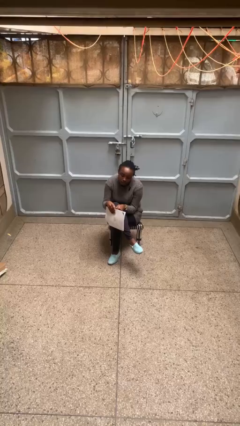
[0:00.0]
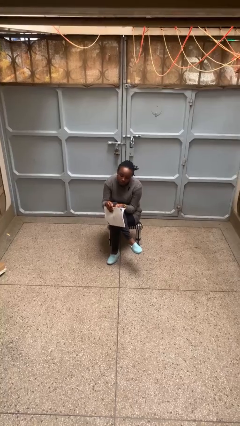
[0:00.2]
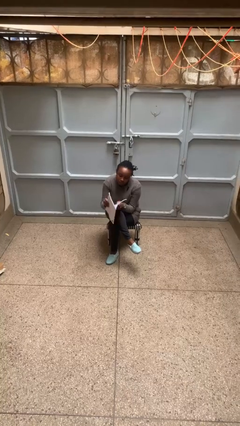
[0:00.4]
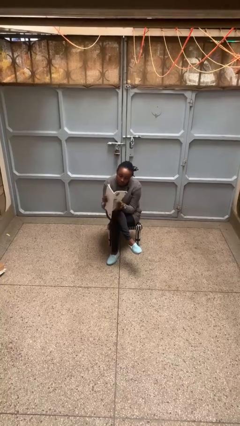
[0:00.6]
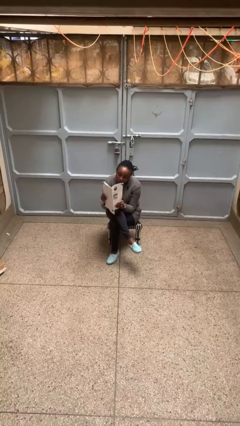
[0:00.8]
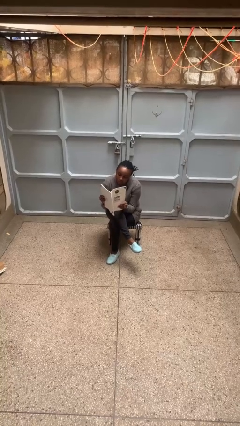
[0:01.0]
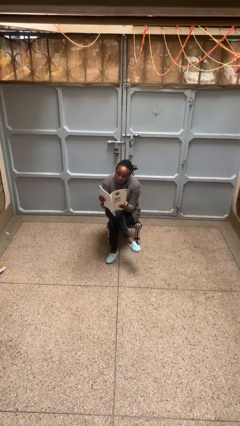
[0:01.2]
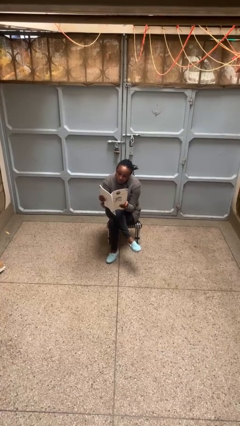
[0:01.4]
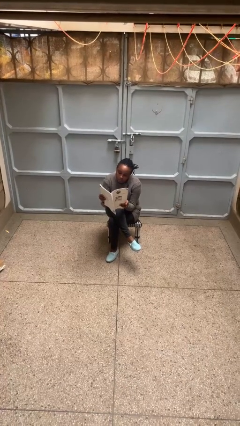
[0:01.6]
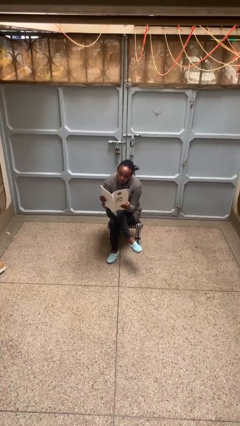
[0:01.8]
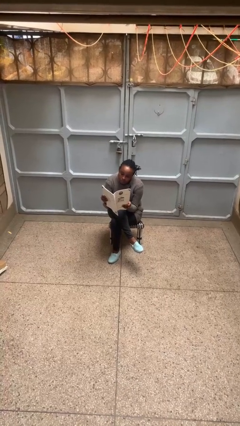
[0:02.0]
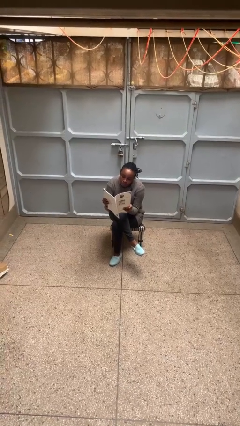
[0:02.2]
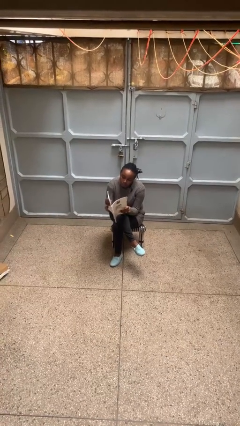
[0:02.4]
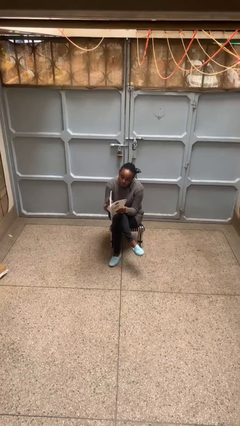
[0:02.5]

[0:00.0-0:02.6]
person reads magazine

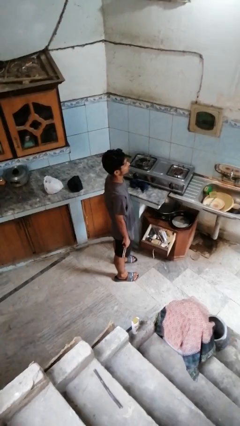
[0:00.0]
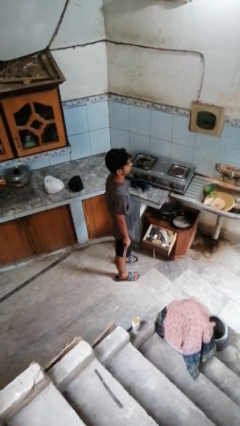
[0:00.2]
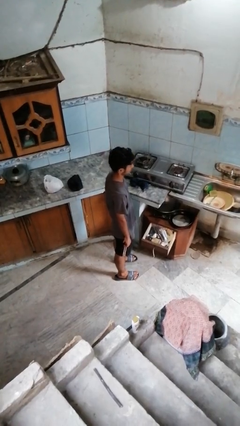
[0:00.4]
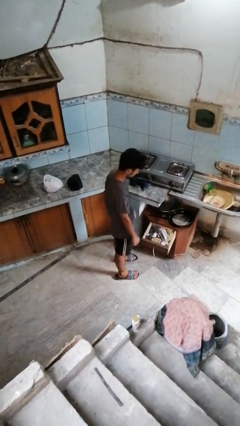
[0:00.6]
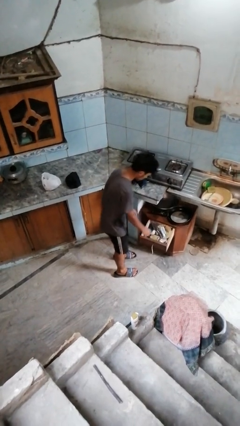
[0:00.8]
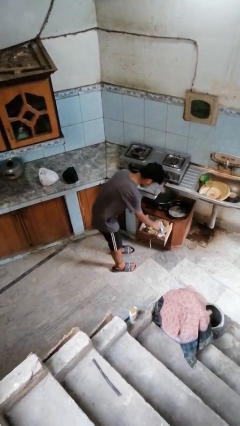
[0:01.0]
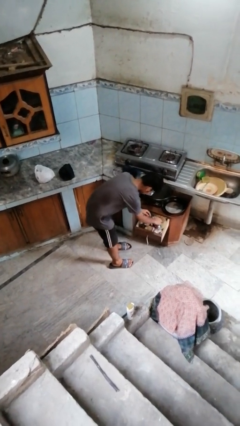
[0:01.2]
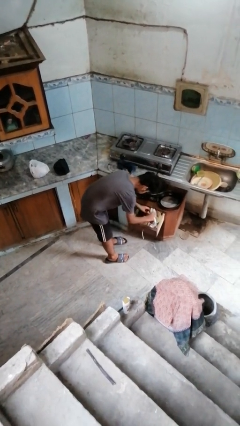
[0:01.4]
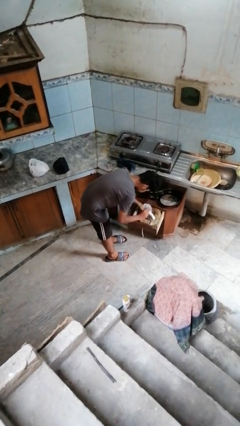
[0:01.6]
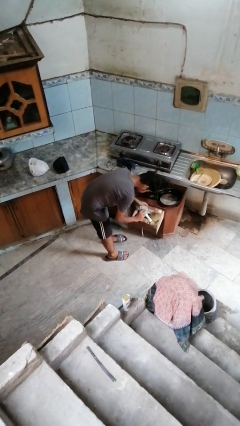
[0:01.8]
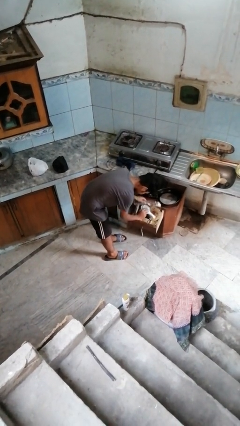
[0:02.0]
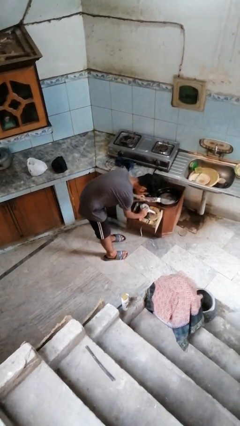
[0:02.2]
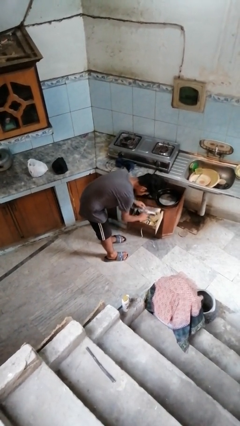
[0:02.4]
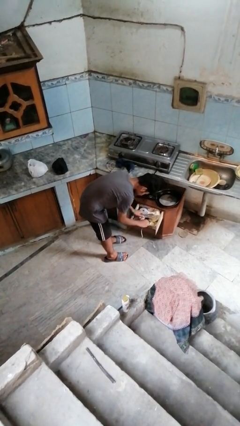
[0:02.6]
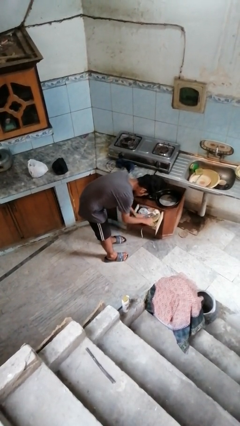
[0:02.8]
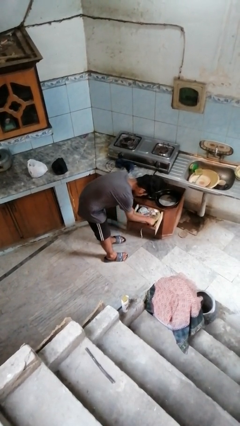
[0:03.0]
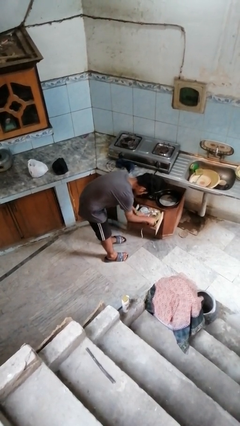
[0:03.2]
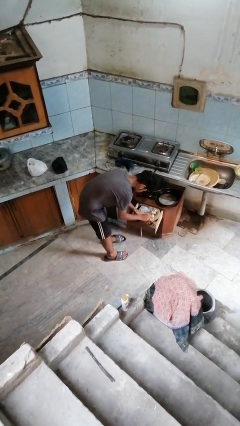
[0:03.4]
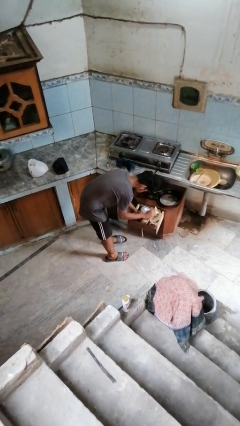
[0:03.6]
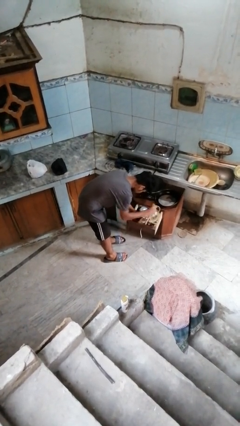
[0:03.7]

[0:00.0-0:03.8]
person searches in kitchen drawer

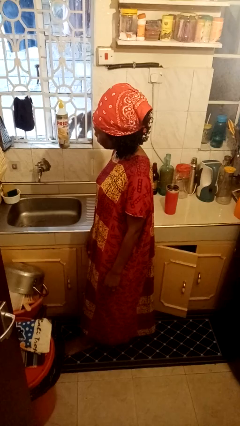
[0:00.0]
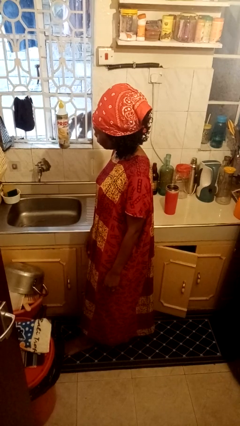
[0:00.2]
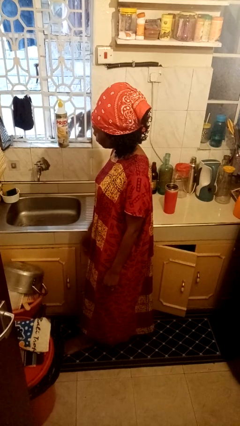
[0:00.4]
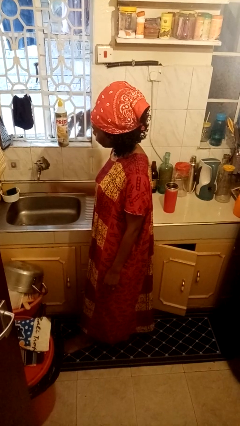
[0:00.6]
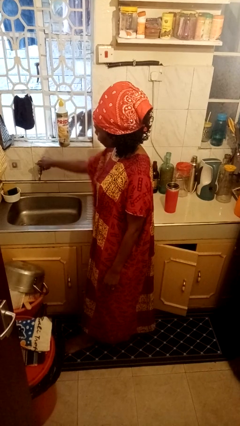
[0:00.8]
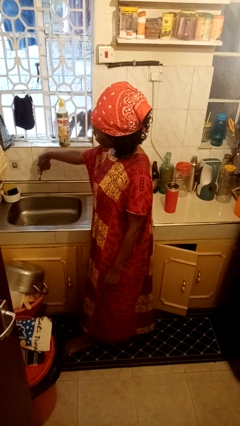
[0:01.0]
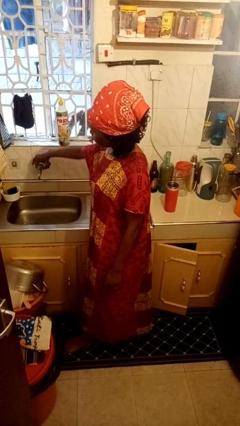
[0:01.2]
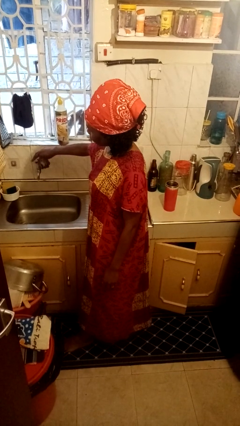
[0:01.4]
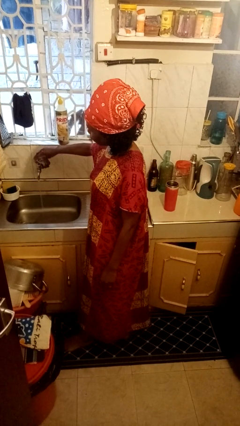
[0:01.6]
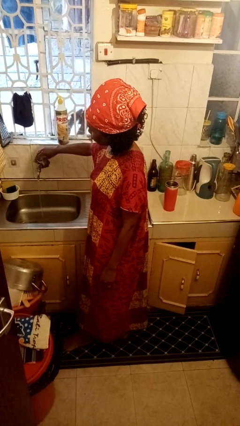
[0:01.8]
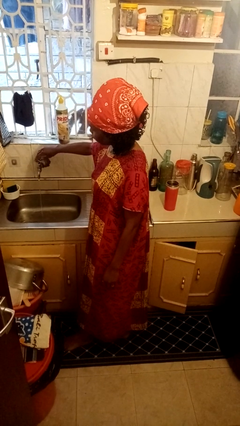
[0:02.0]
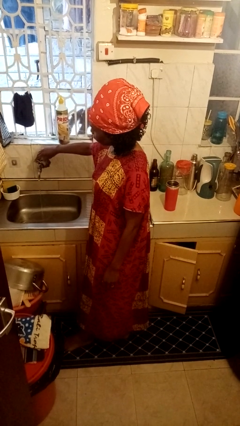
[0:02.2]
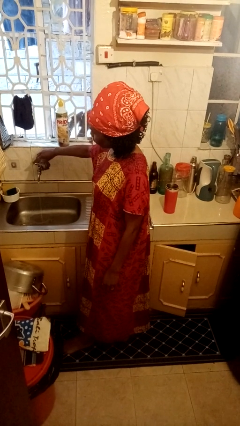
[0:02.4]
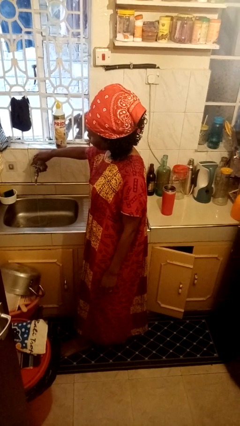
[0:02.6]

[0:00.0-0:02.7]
person turns on faucet

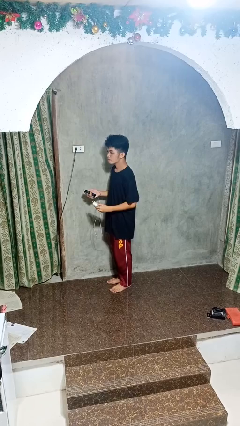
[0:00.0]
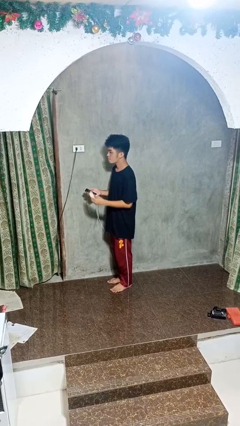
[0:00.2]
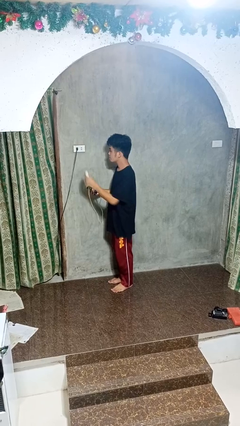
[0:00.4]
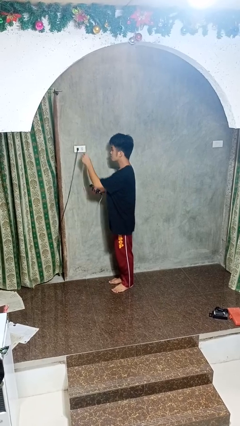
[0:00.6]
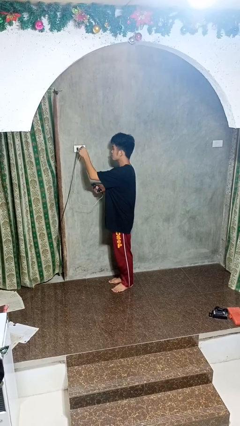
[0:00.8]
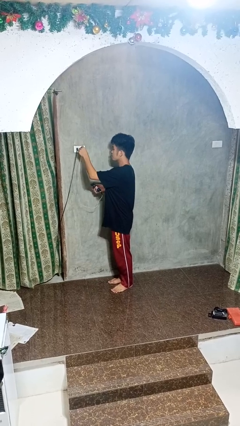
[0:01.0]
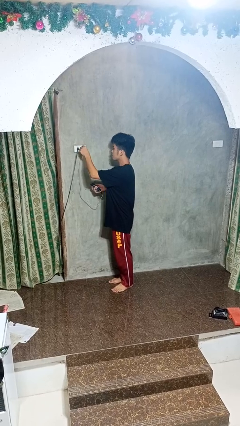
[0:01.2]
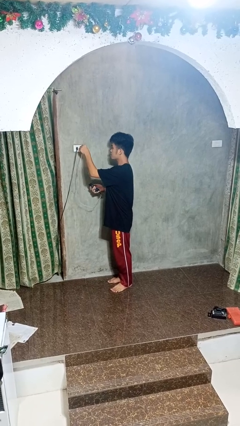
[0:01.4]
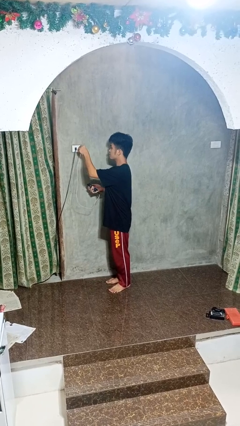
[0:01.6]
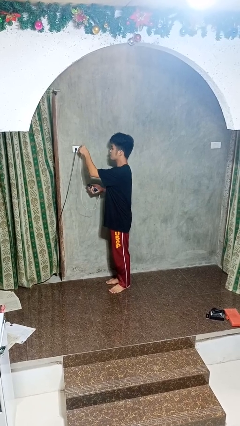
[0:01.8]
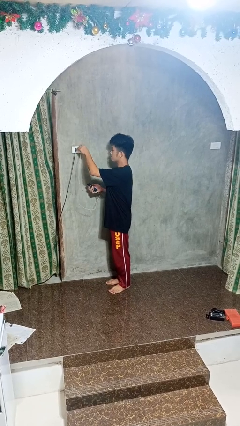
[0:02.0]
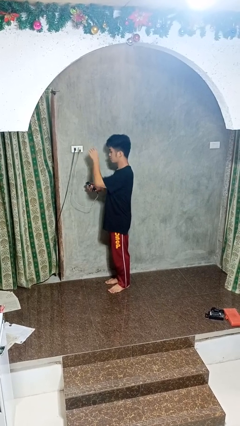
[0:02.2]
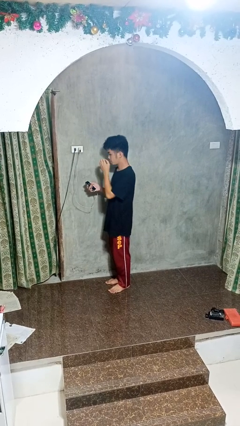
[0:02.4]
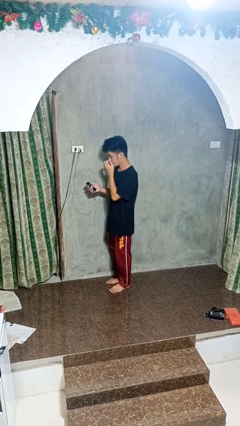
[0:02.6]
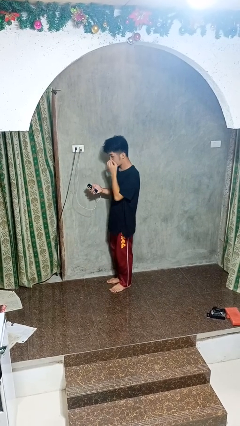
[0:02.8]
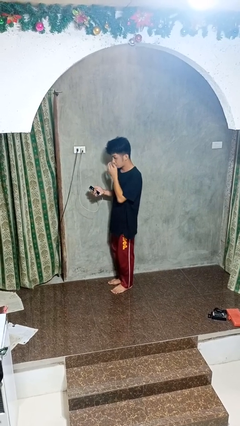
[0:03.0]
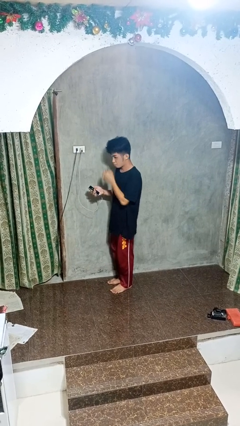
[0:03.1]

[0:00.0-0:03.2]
person plugs into electrical socket

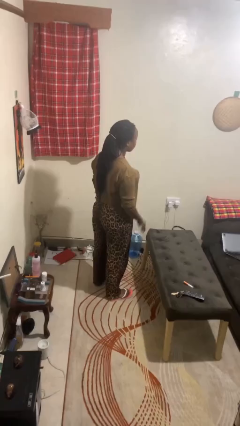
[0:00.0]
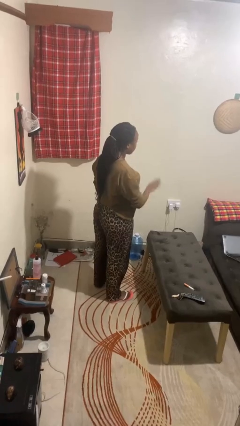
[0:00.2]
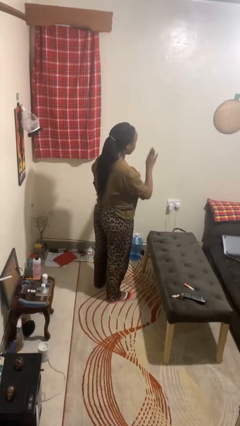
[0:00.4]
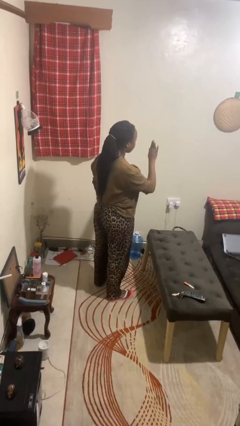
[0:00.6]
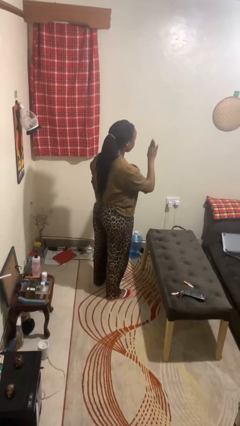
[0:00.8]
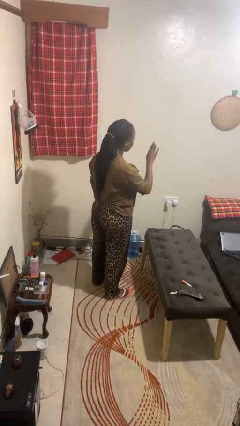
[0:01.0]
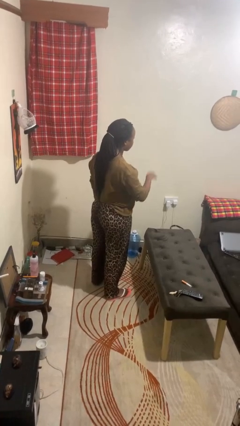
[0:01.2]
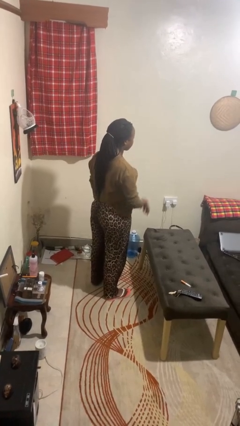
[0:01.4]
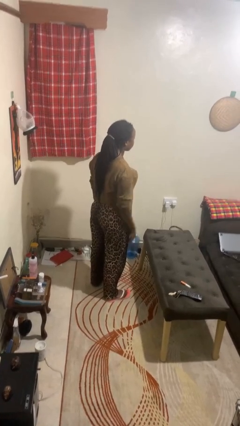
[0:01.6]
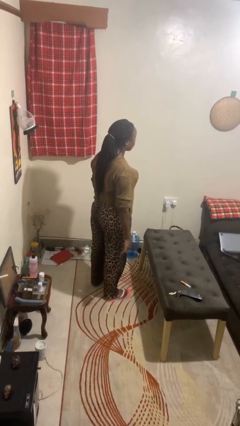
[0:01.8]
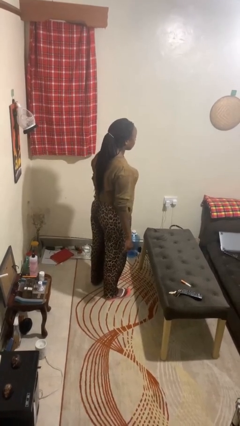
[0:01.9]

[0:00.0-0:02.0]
person gestures stop

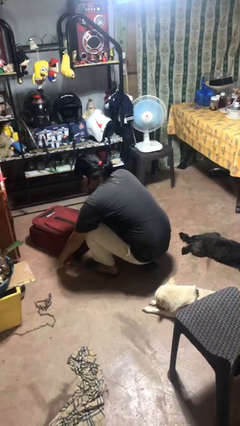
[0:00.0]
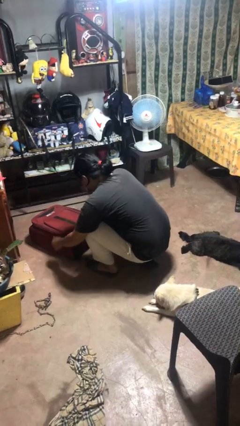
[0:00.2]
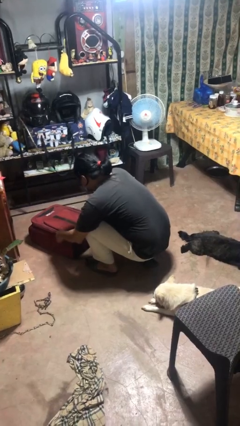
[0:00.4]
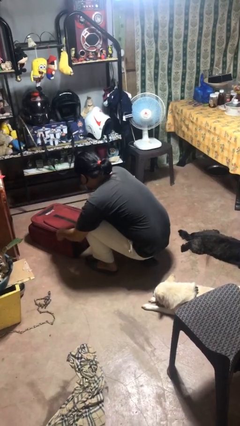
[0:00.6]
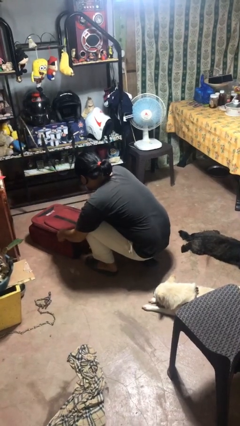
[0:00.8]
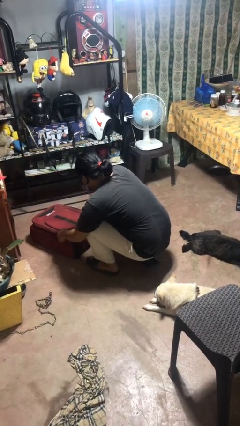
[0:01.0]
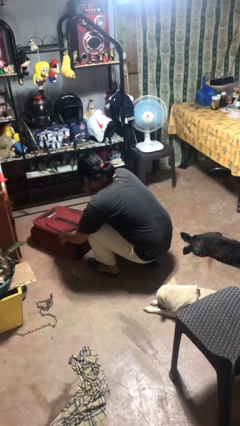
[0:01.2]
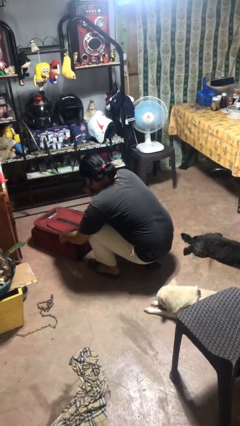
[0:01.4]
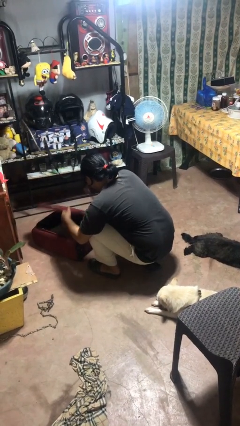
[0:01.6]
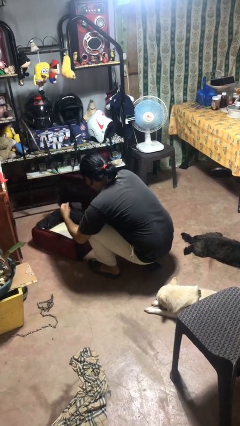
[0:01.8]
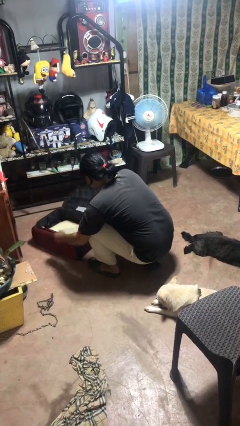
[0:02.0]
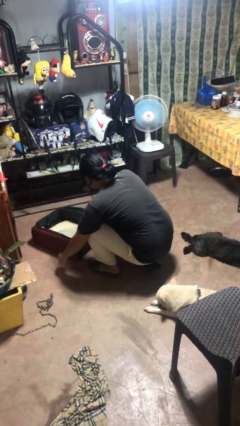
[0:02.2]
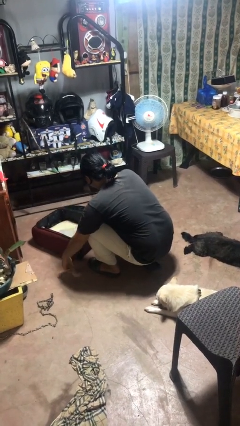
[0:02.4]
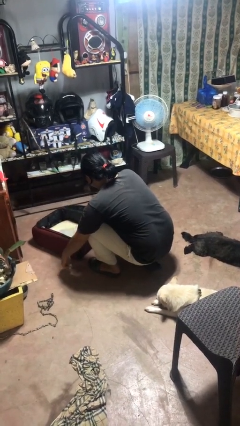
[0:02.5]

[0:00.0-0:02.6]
person opens suitcase
